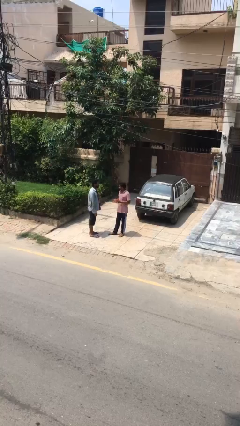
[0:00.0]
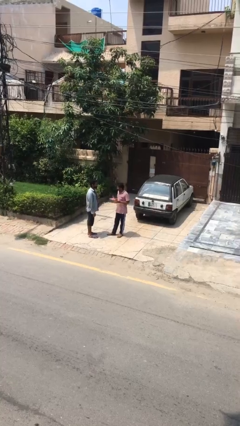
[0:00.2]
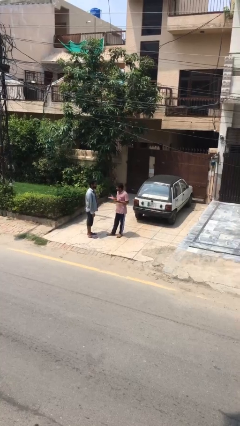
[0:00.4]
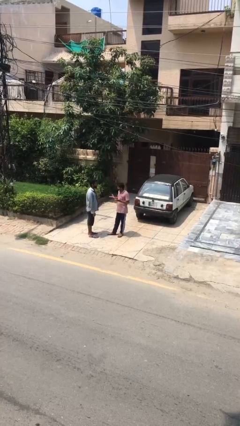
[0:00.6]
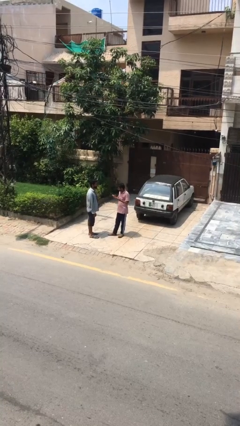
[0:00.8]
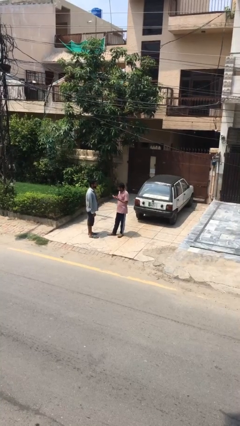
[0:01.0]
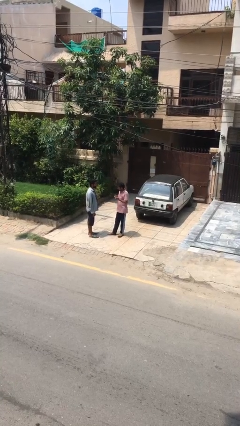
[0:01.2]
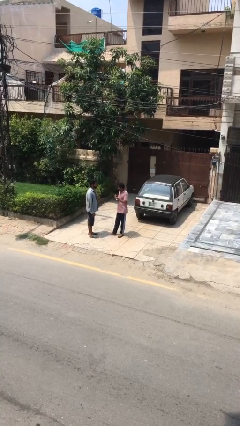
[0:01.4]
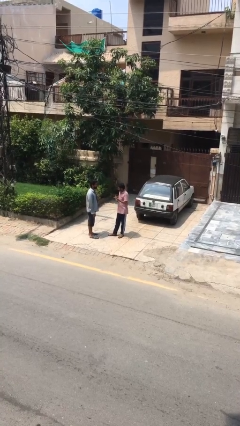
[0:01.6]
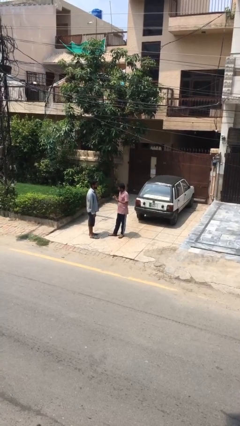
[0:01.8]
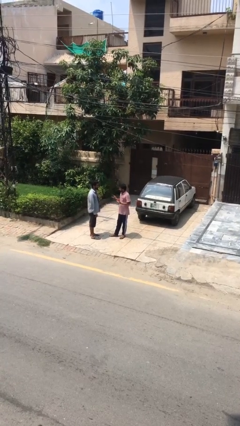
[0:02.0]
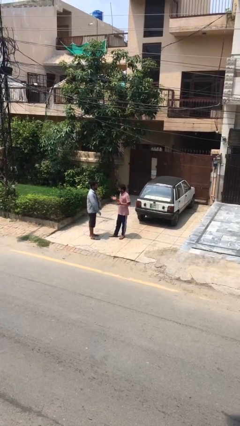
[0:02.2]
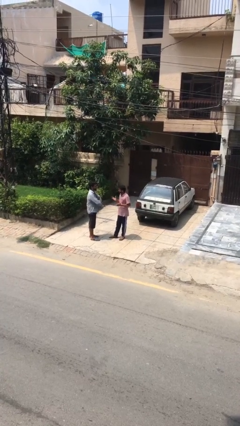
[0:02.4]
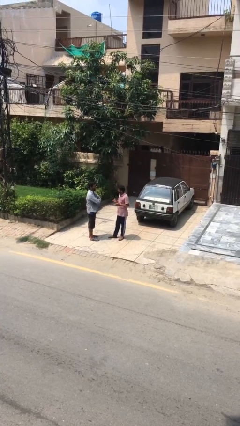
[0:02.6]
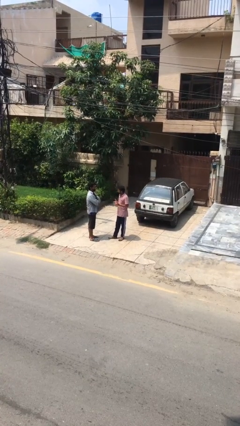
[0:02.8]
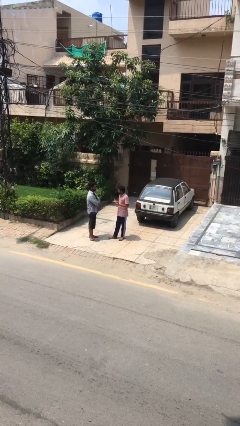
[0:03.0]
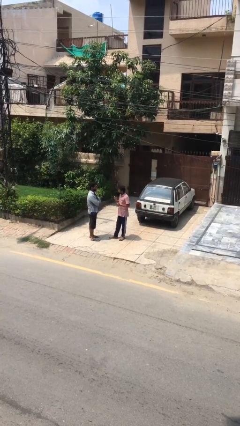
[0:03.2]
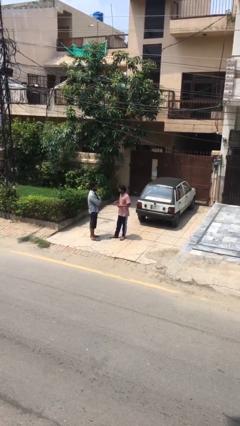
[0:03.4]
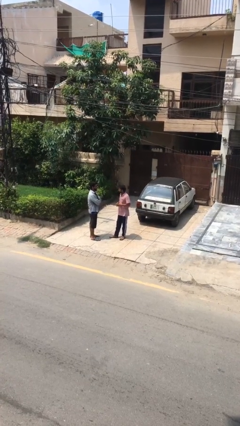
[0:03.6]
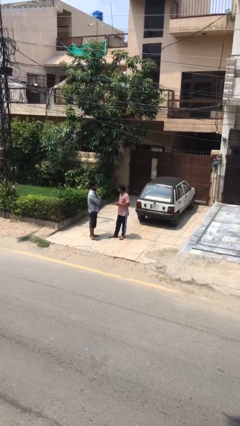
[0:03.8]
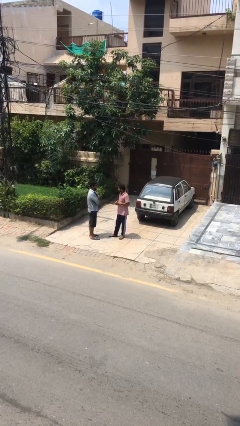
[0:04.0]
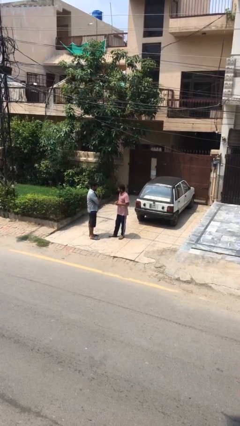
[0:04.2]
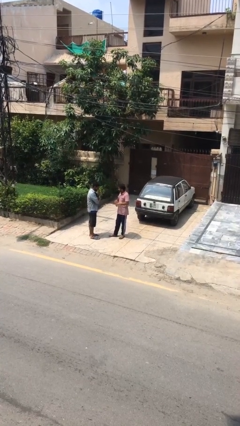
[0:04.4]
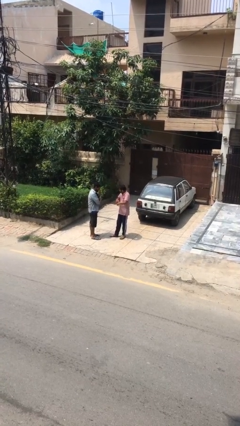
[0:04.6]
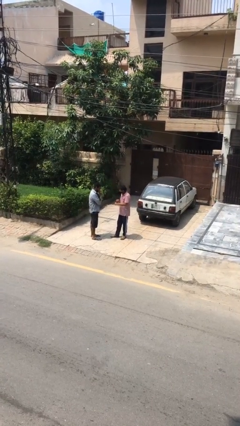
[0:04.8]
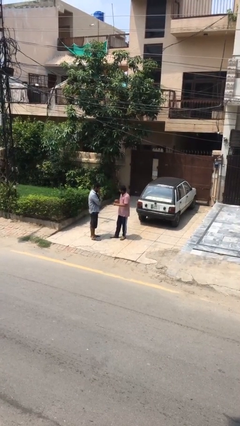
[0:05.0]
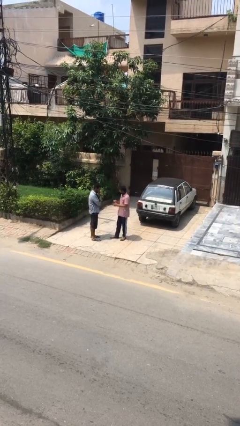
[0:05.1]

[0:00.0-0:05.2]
person talks to person

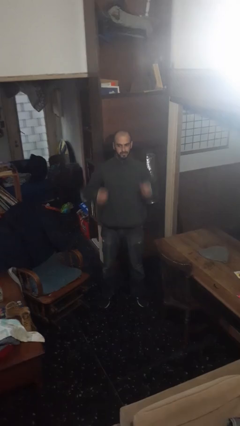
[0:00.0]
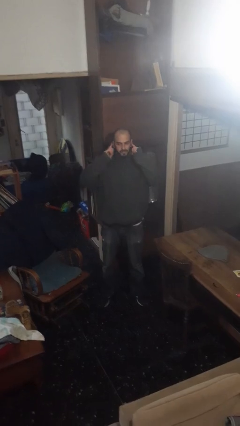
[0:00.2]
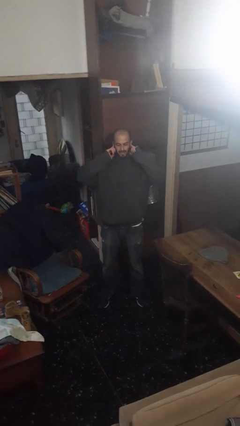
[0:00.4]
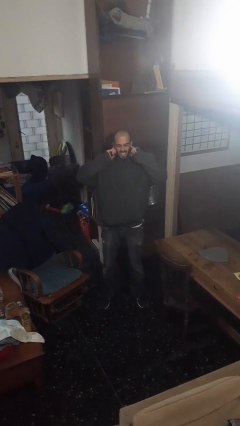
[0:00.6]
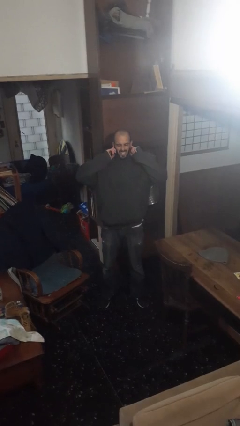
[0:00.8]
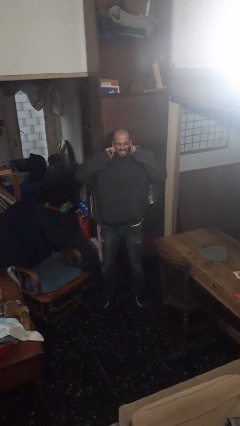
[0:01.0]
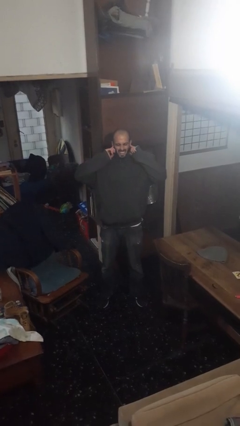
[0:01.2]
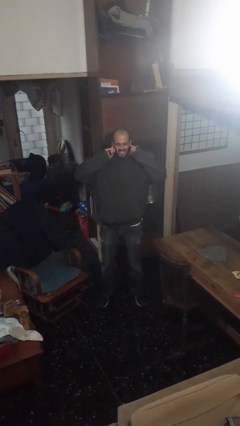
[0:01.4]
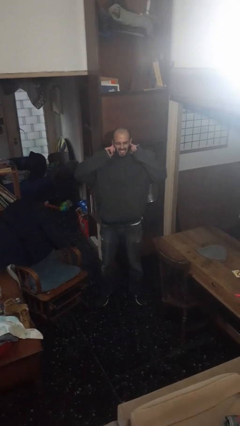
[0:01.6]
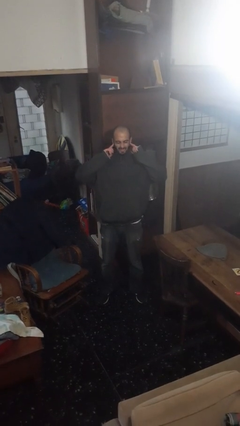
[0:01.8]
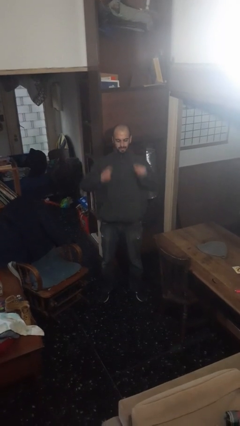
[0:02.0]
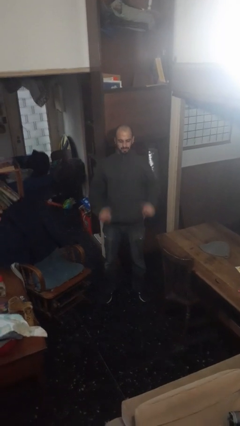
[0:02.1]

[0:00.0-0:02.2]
person puts fingers in ear

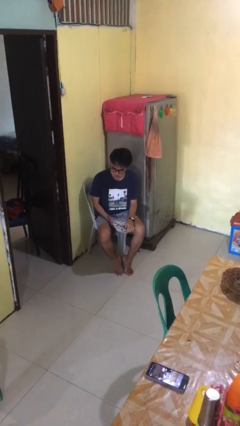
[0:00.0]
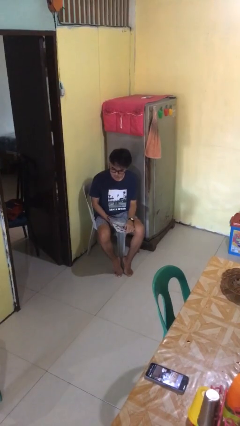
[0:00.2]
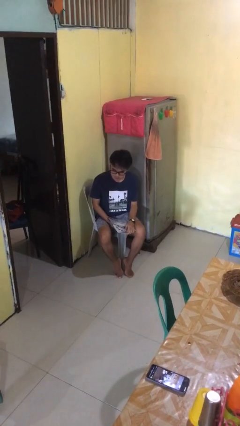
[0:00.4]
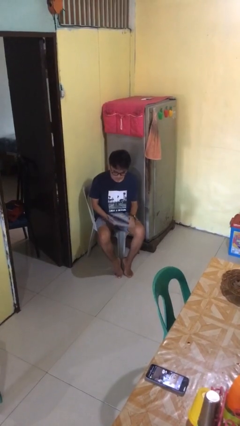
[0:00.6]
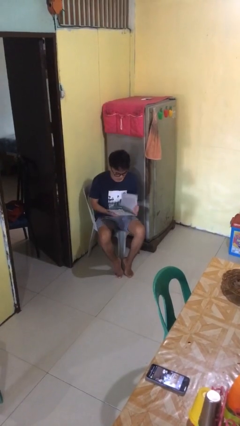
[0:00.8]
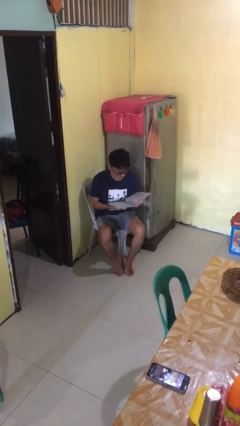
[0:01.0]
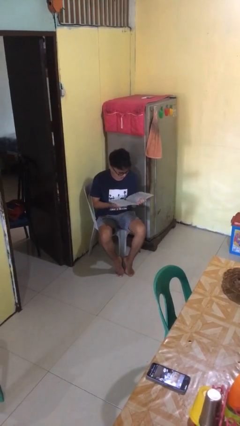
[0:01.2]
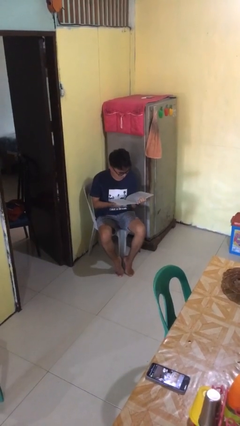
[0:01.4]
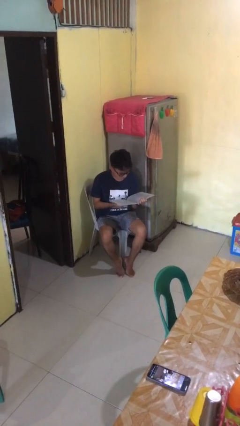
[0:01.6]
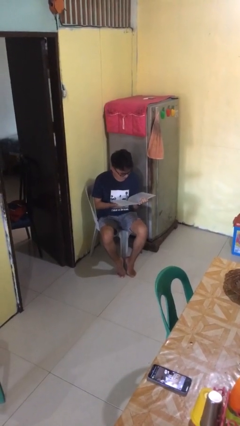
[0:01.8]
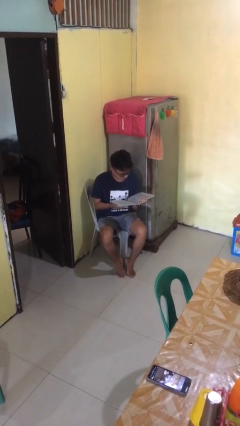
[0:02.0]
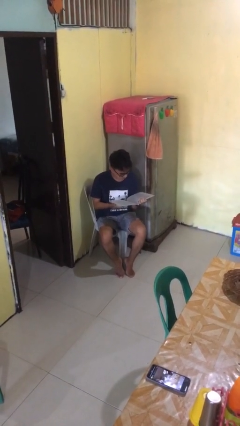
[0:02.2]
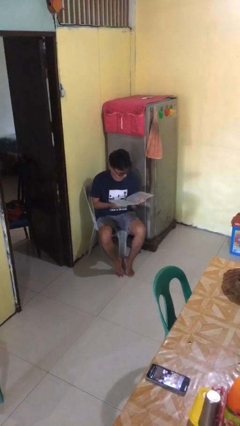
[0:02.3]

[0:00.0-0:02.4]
person reads book

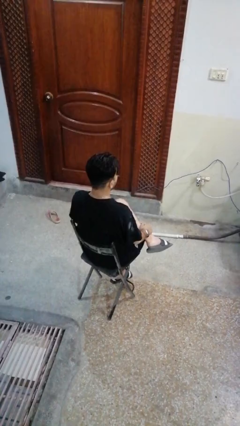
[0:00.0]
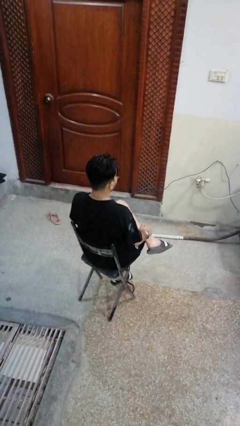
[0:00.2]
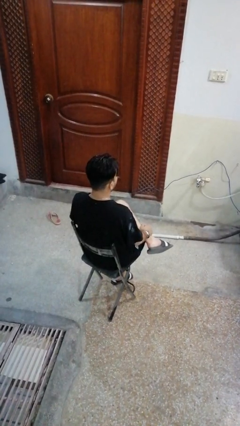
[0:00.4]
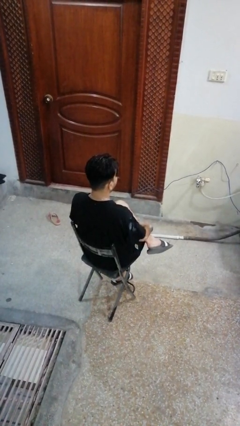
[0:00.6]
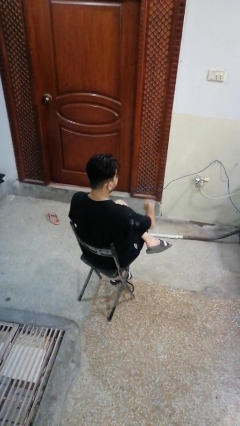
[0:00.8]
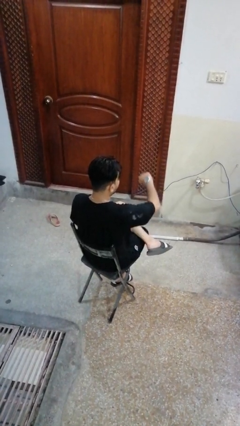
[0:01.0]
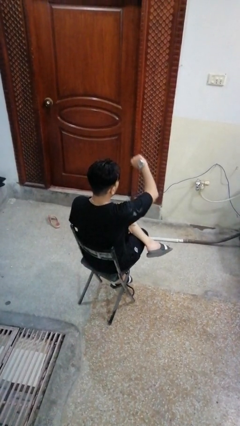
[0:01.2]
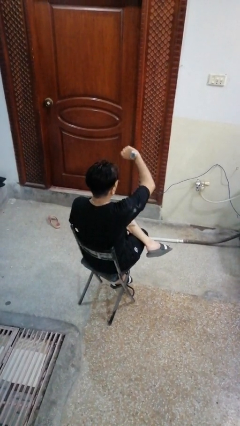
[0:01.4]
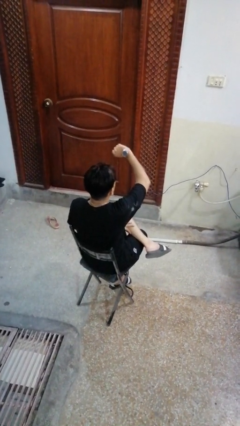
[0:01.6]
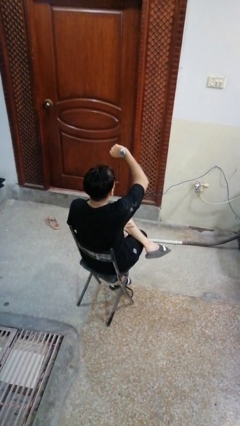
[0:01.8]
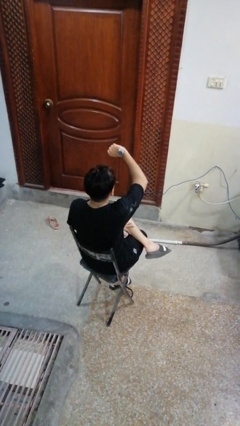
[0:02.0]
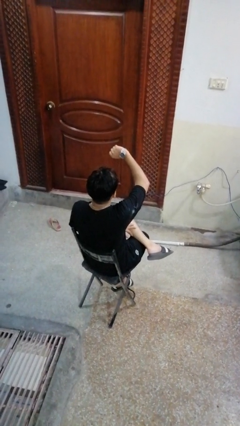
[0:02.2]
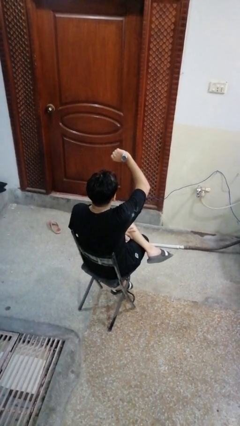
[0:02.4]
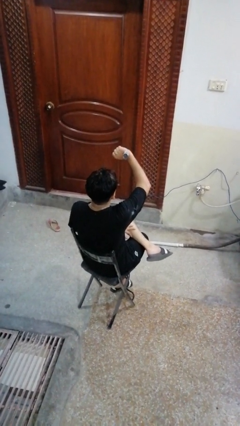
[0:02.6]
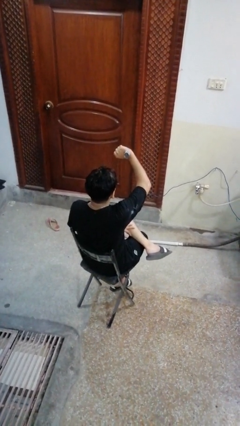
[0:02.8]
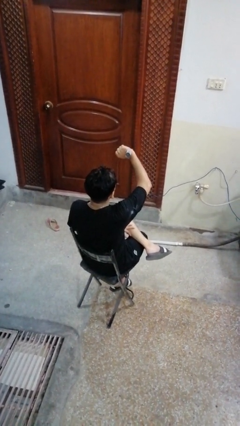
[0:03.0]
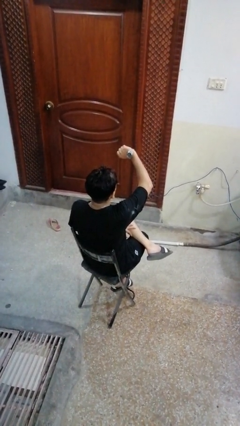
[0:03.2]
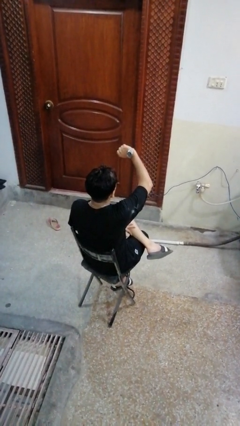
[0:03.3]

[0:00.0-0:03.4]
person looks at wristwatch

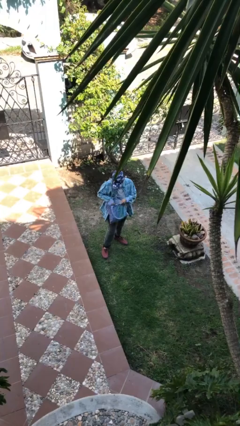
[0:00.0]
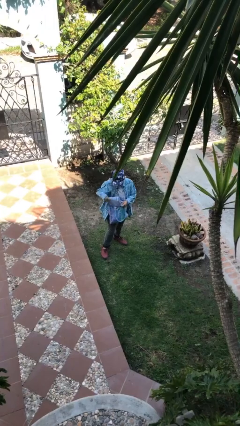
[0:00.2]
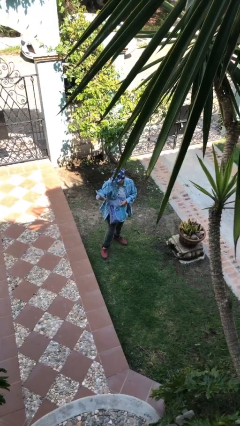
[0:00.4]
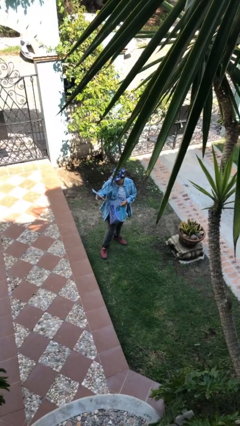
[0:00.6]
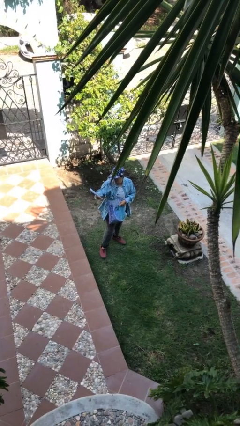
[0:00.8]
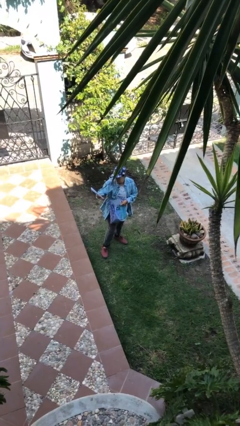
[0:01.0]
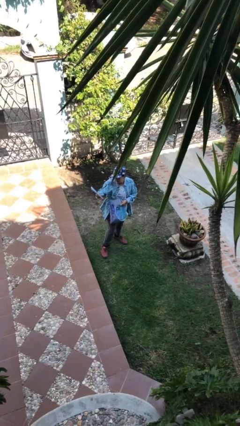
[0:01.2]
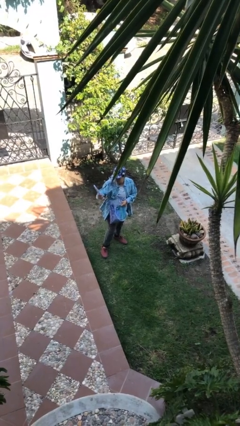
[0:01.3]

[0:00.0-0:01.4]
person takes object from purse

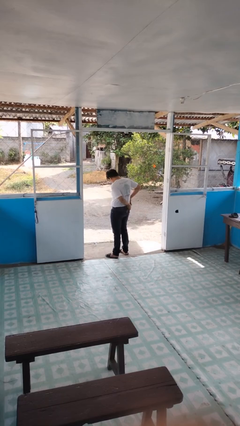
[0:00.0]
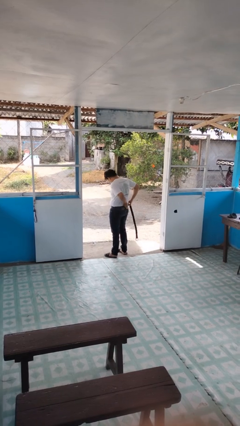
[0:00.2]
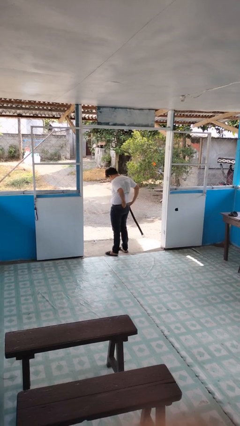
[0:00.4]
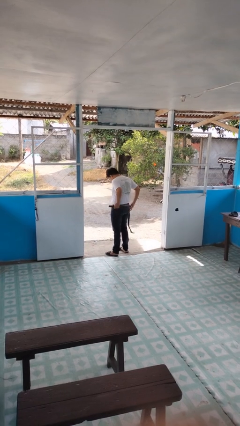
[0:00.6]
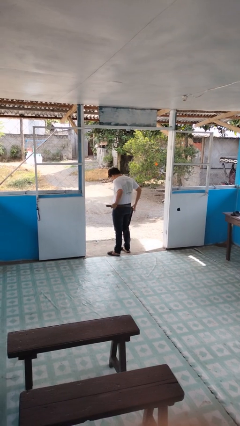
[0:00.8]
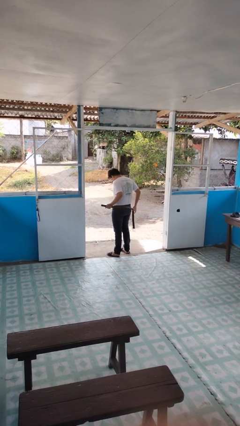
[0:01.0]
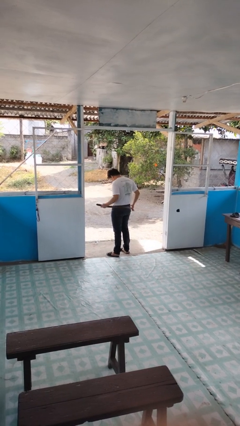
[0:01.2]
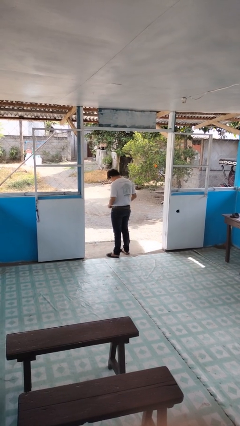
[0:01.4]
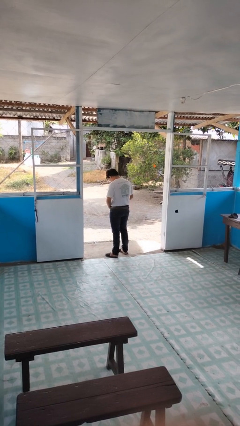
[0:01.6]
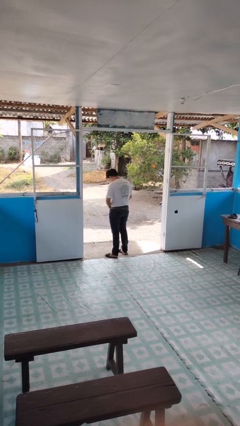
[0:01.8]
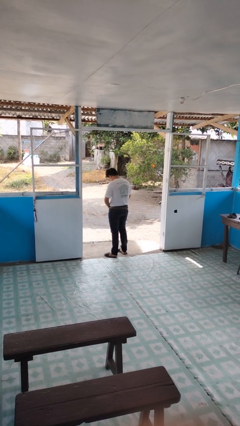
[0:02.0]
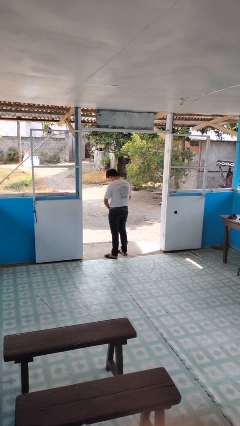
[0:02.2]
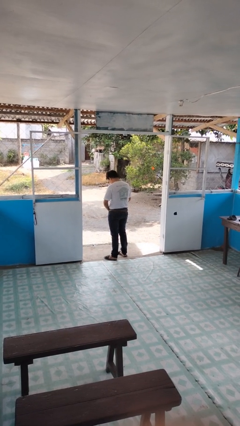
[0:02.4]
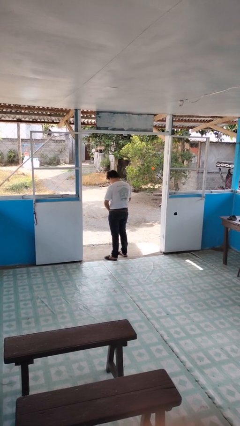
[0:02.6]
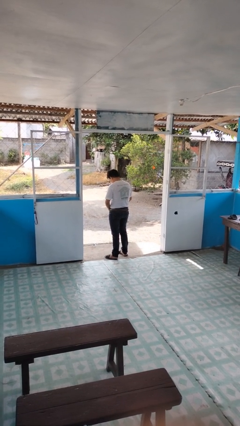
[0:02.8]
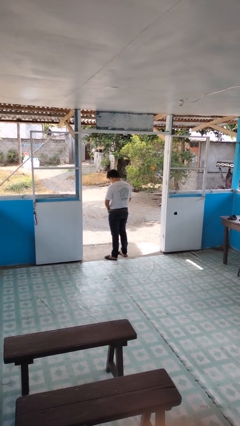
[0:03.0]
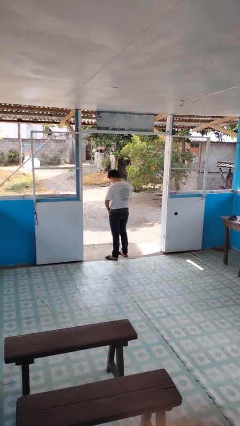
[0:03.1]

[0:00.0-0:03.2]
person puts on belt
